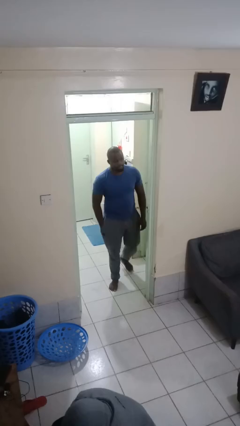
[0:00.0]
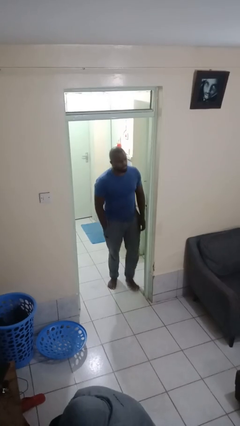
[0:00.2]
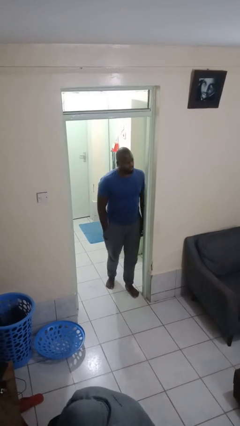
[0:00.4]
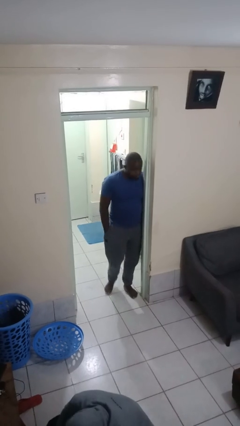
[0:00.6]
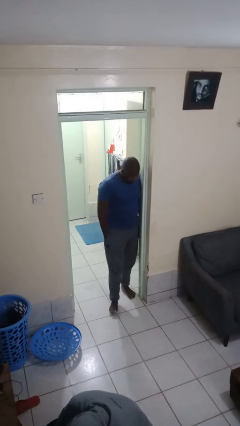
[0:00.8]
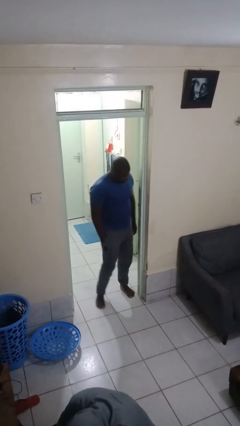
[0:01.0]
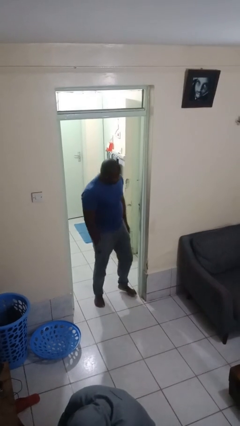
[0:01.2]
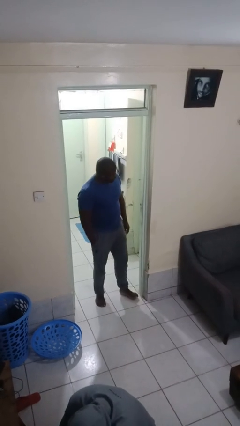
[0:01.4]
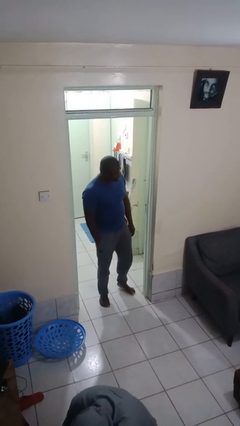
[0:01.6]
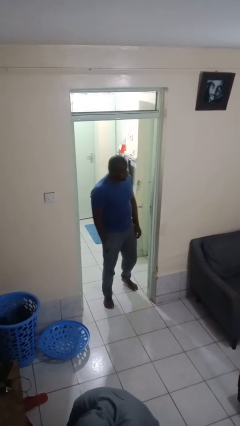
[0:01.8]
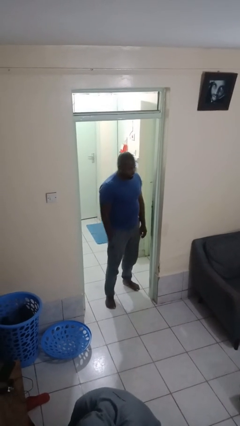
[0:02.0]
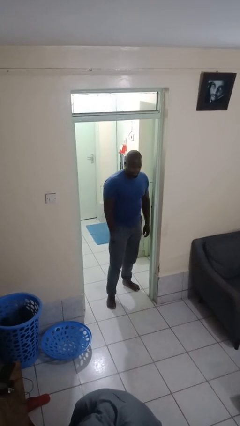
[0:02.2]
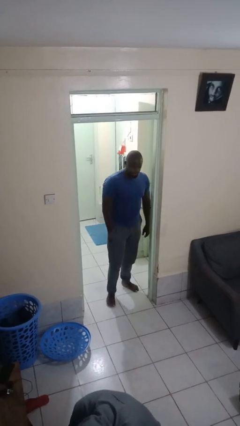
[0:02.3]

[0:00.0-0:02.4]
person bumps into wall

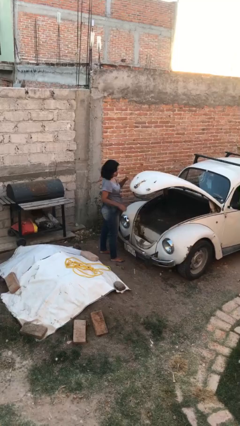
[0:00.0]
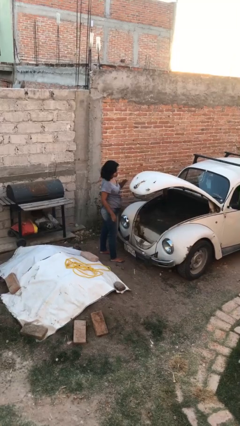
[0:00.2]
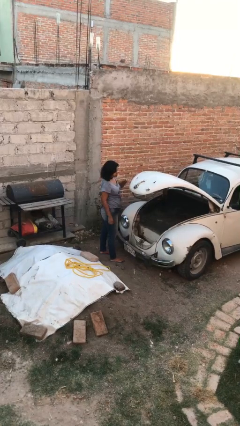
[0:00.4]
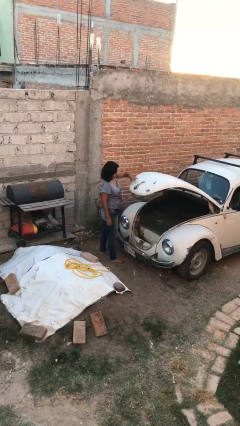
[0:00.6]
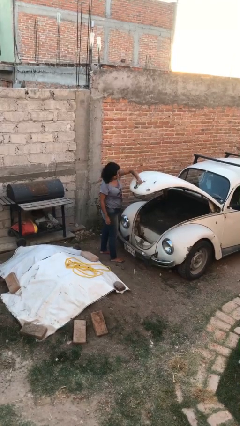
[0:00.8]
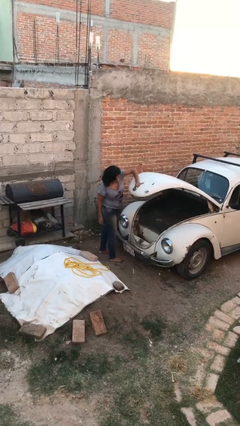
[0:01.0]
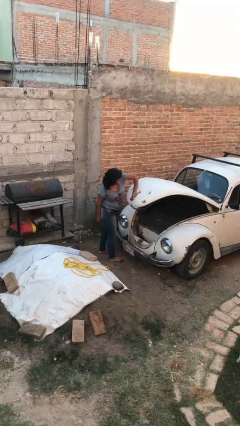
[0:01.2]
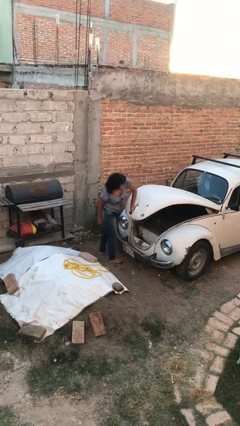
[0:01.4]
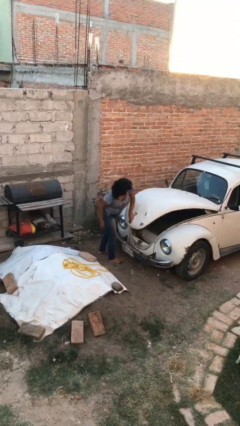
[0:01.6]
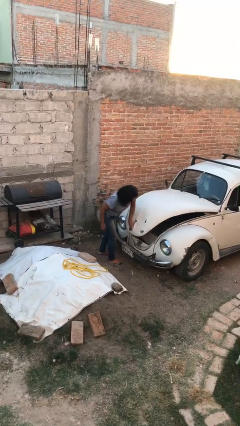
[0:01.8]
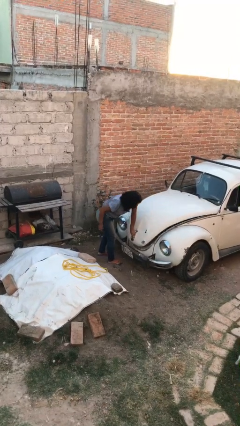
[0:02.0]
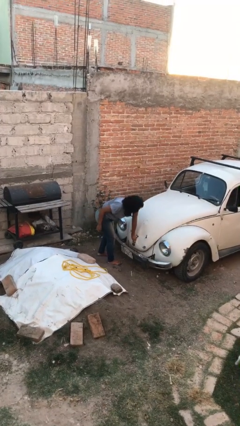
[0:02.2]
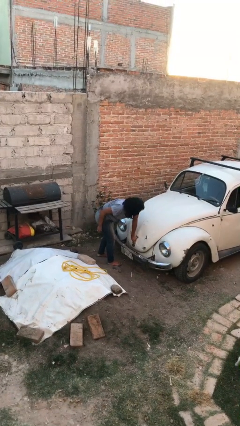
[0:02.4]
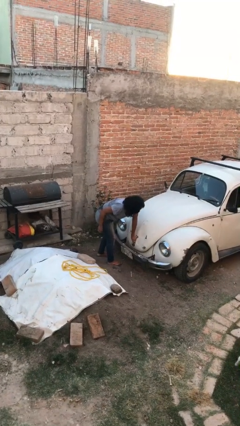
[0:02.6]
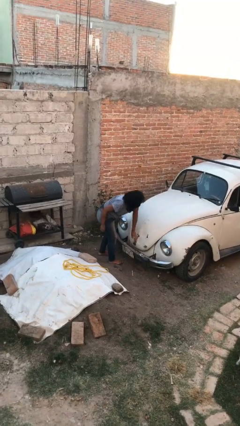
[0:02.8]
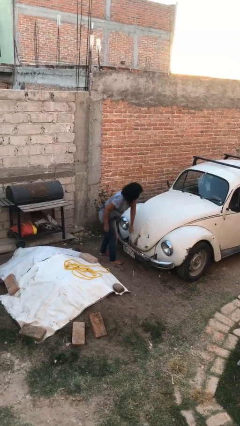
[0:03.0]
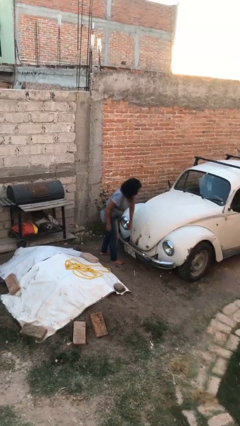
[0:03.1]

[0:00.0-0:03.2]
person closes car trunk

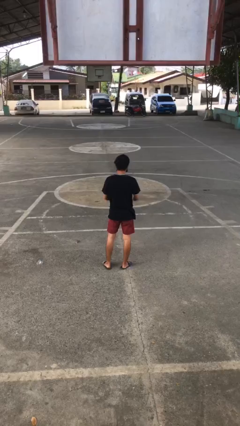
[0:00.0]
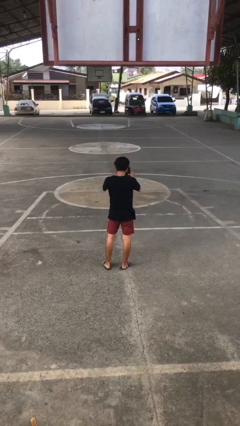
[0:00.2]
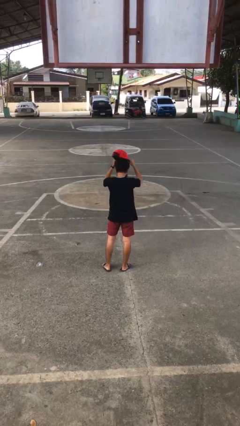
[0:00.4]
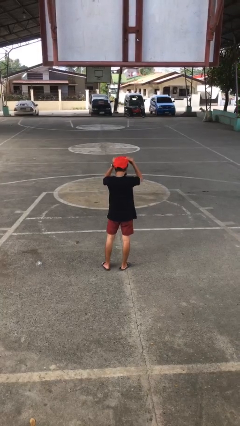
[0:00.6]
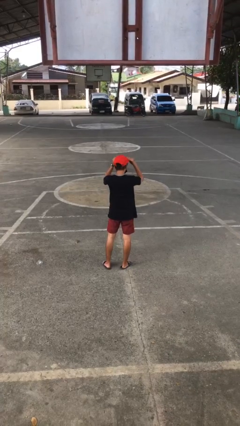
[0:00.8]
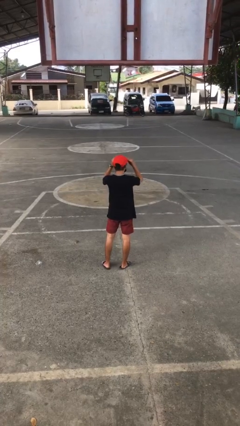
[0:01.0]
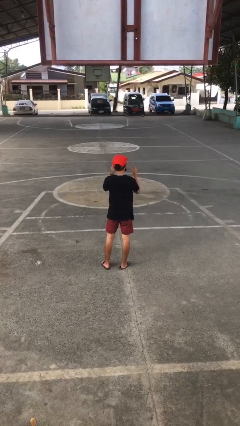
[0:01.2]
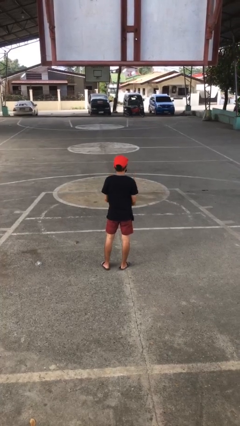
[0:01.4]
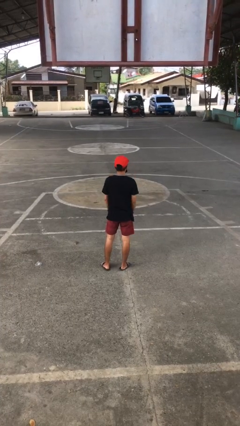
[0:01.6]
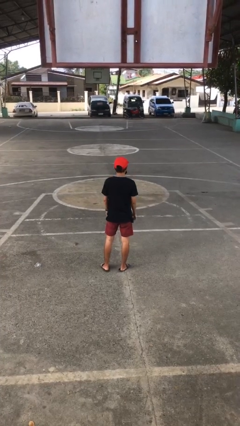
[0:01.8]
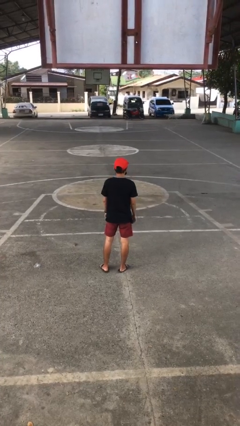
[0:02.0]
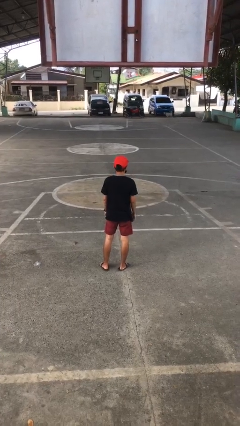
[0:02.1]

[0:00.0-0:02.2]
person puts on hat

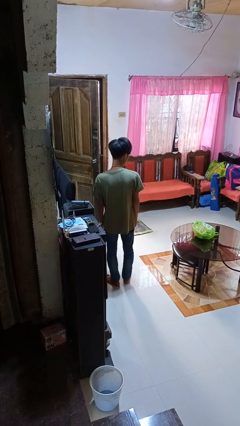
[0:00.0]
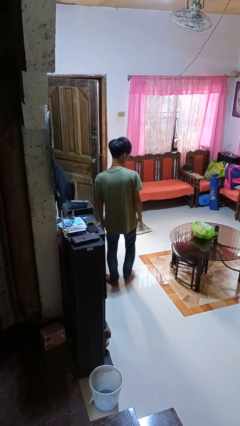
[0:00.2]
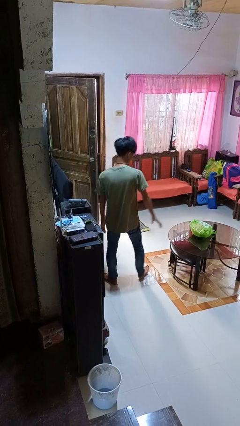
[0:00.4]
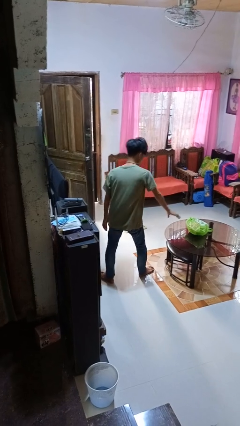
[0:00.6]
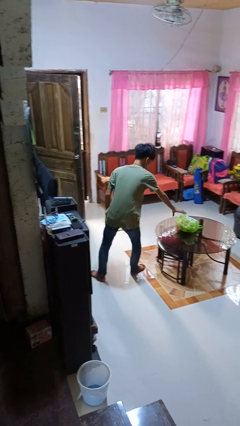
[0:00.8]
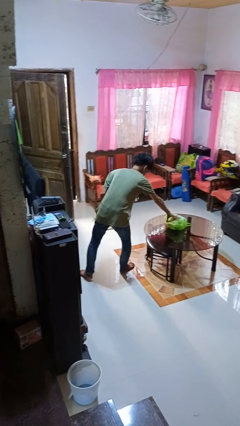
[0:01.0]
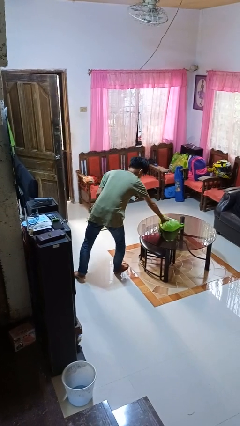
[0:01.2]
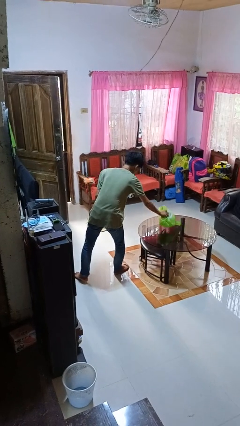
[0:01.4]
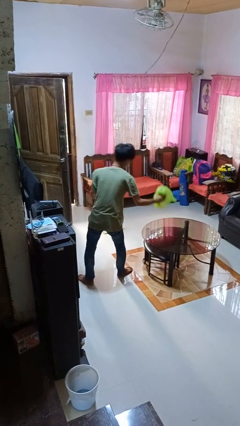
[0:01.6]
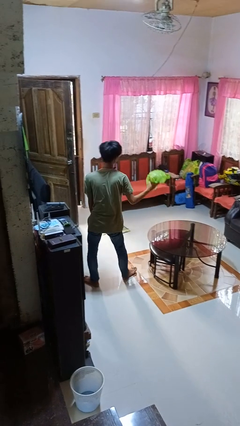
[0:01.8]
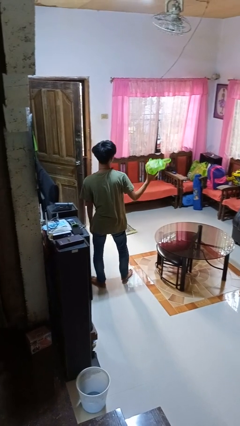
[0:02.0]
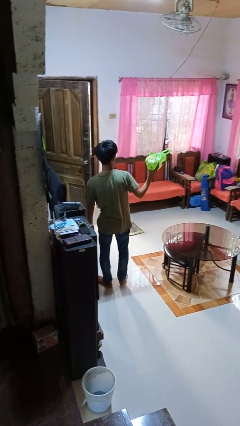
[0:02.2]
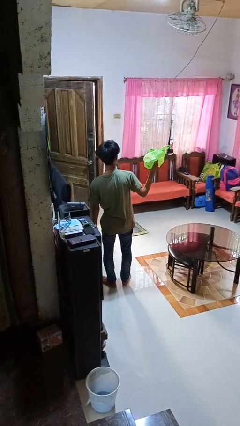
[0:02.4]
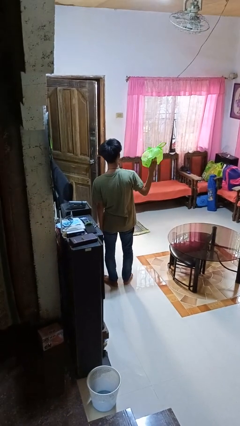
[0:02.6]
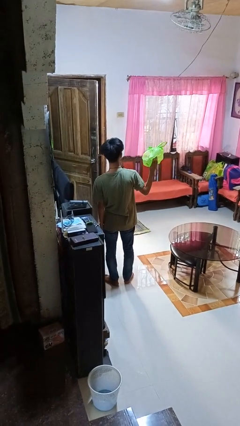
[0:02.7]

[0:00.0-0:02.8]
person picks up object from table

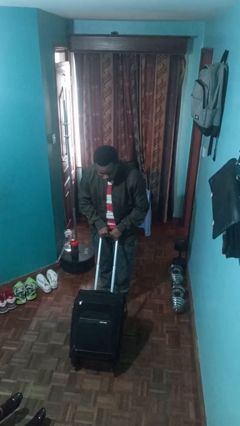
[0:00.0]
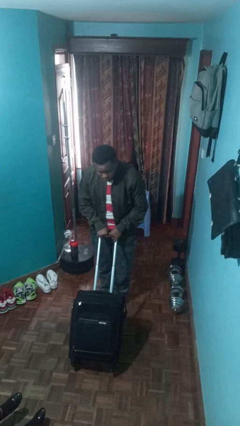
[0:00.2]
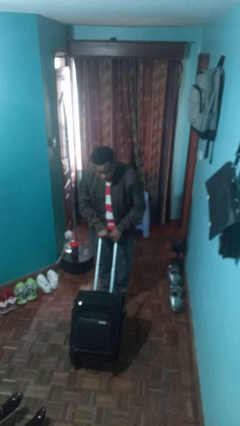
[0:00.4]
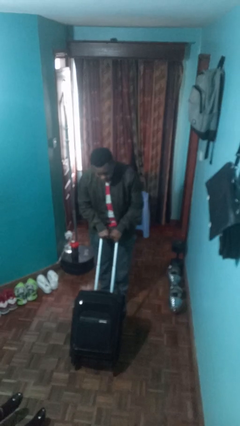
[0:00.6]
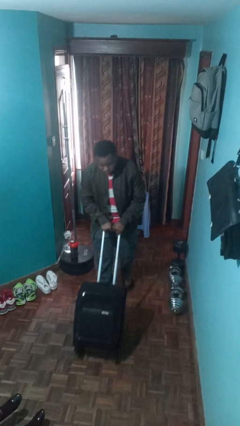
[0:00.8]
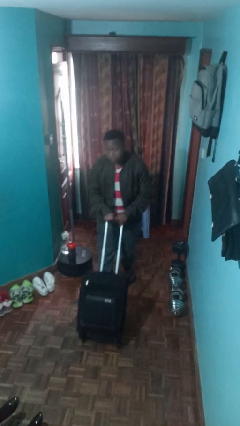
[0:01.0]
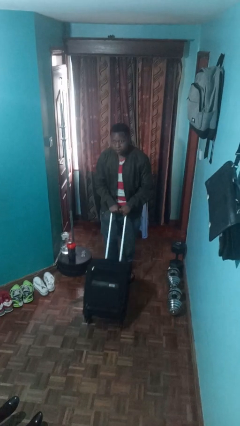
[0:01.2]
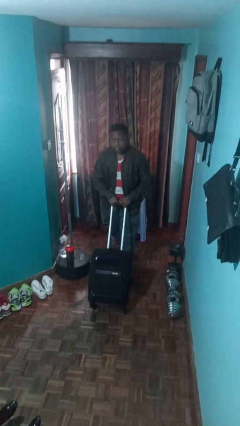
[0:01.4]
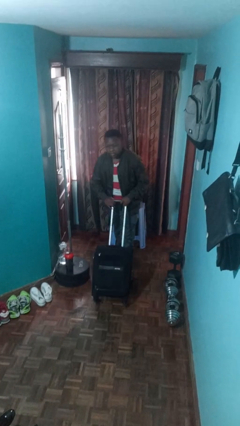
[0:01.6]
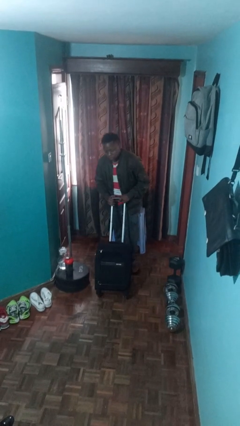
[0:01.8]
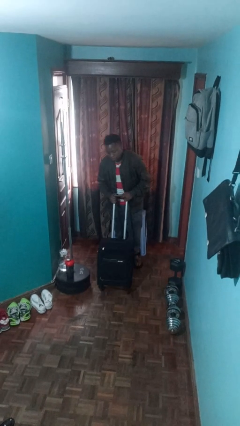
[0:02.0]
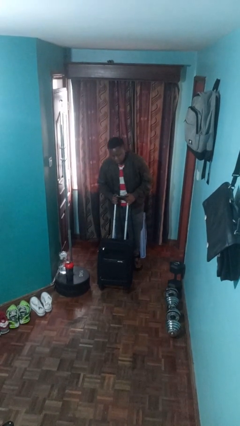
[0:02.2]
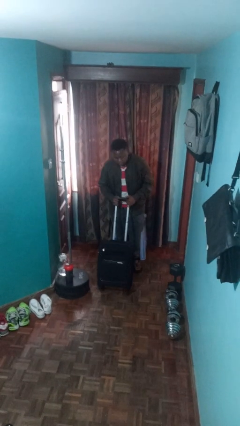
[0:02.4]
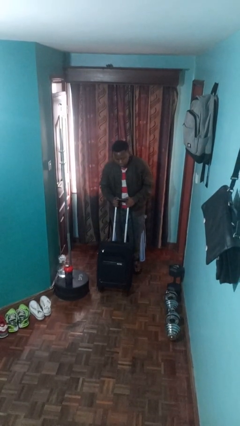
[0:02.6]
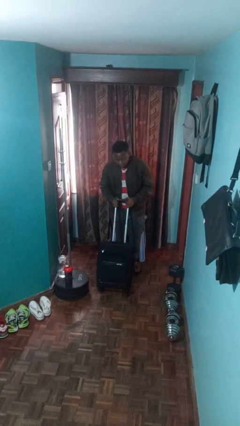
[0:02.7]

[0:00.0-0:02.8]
person pulls wheeled cart

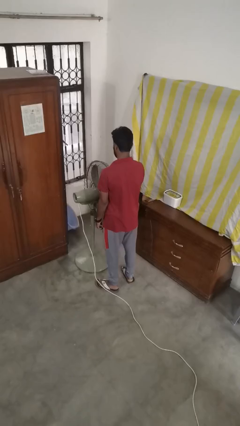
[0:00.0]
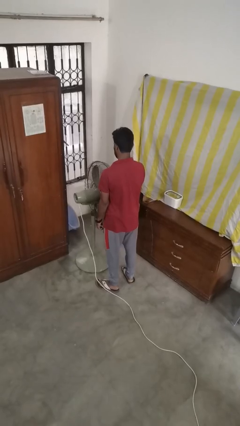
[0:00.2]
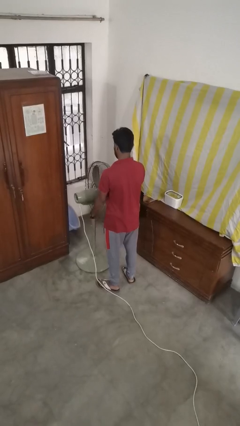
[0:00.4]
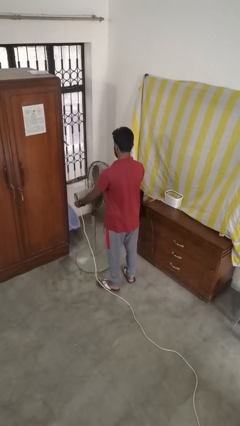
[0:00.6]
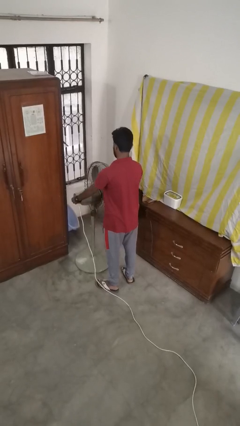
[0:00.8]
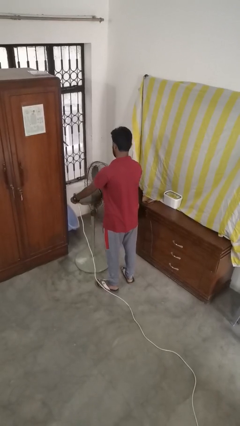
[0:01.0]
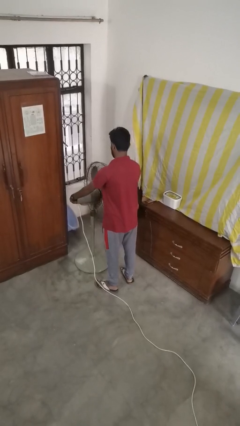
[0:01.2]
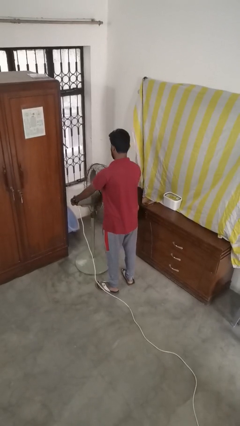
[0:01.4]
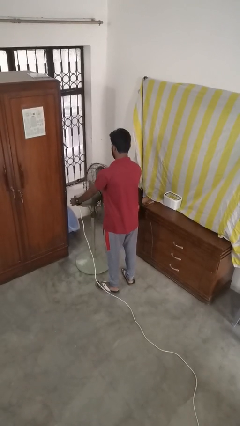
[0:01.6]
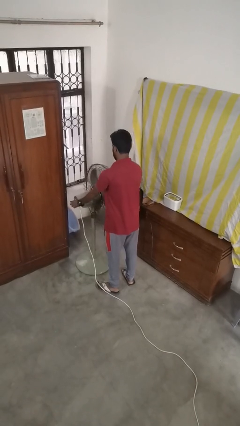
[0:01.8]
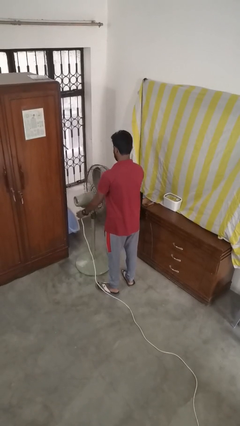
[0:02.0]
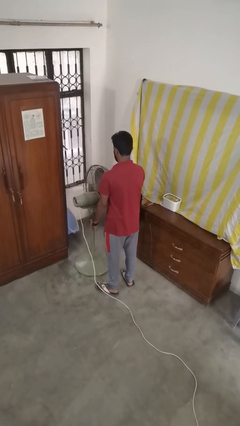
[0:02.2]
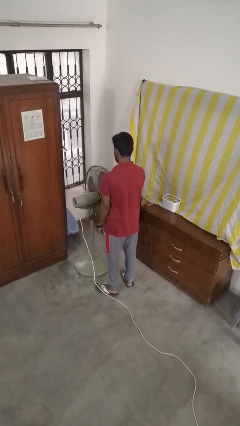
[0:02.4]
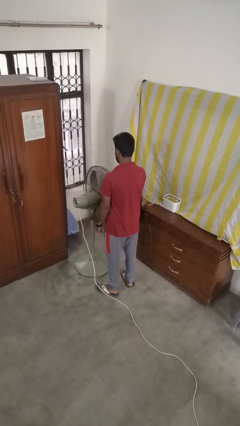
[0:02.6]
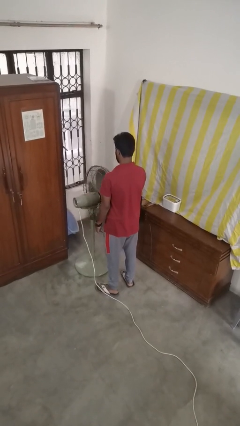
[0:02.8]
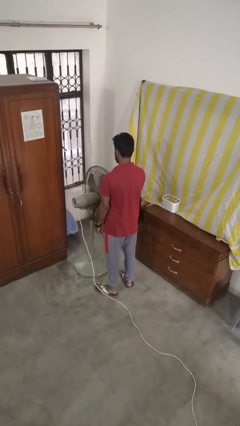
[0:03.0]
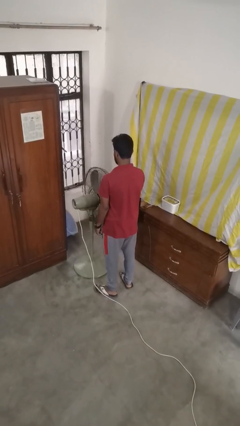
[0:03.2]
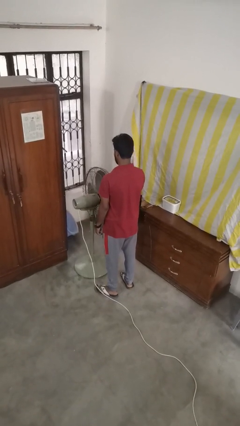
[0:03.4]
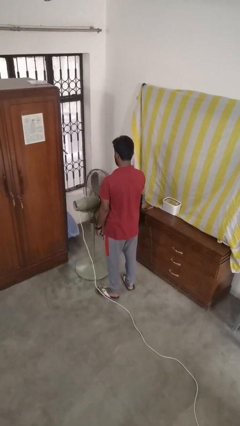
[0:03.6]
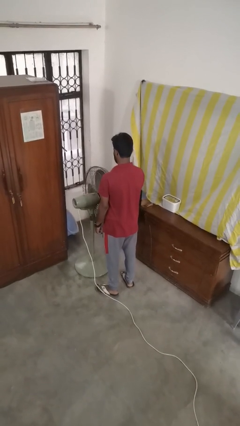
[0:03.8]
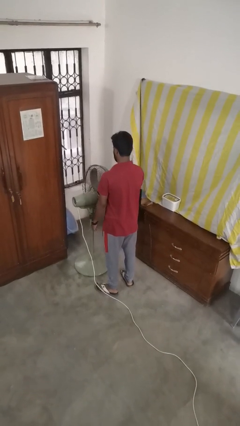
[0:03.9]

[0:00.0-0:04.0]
person turns on fan
